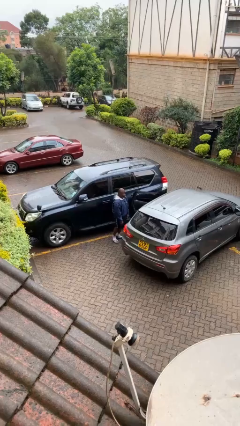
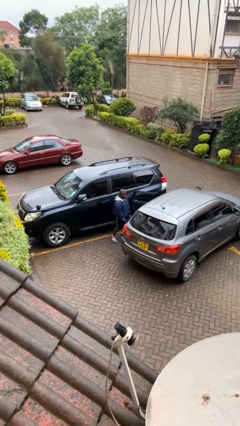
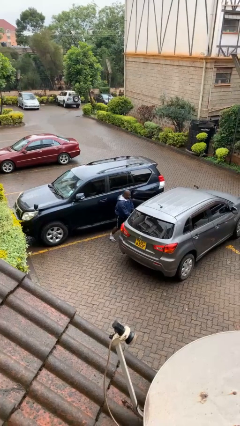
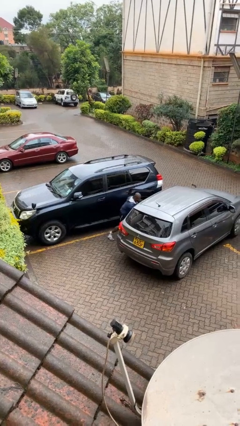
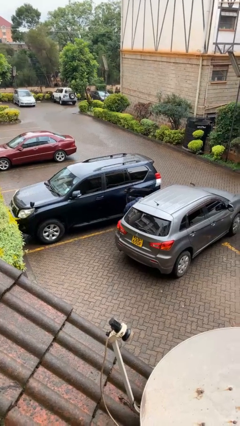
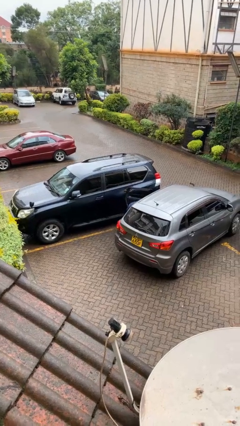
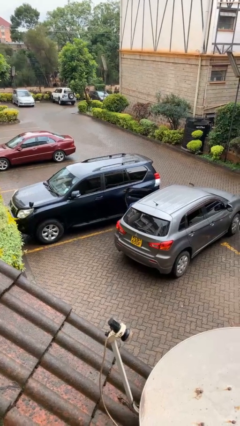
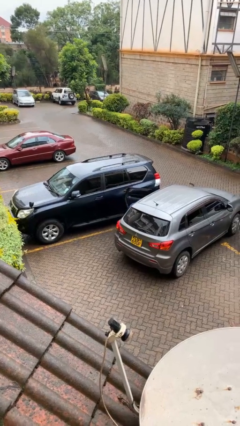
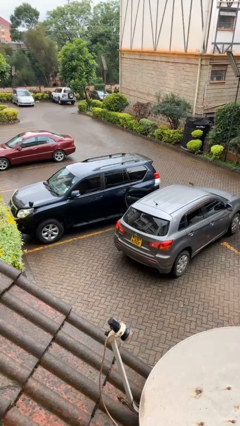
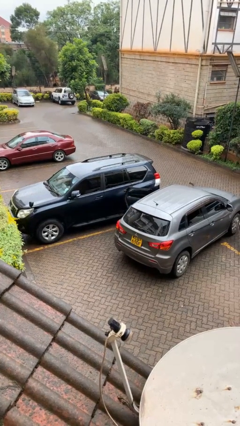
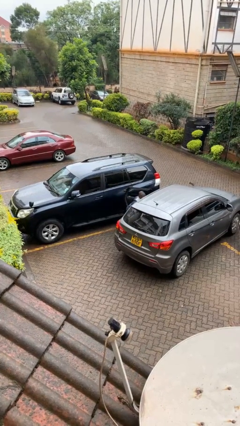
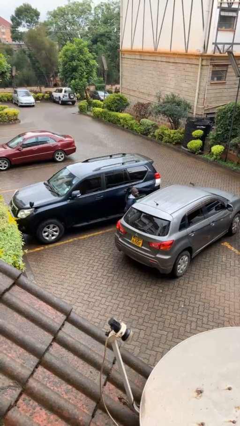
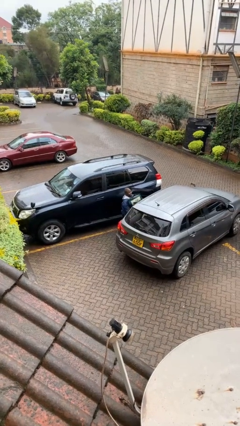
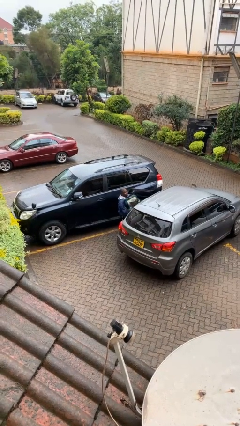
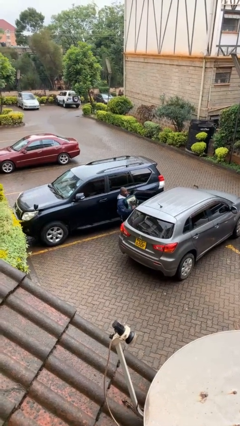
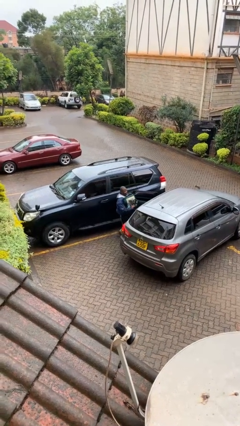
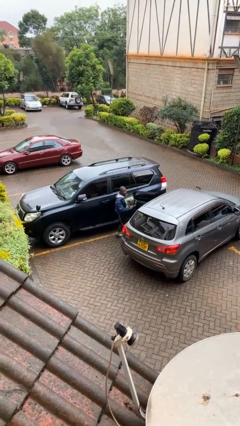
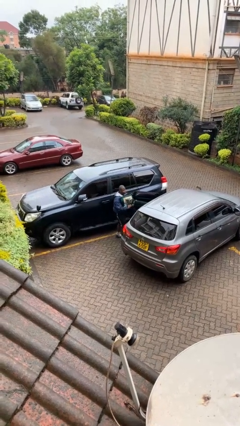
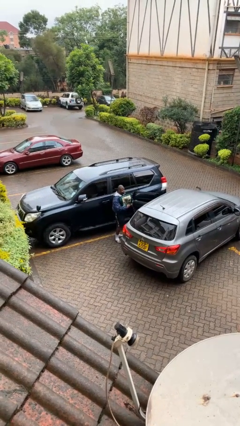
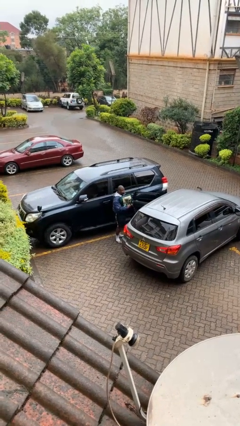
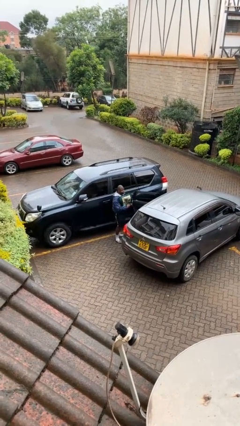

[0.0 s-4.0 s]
person unloads car

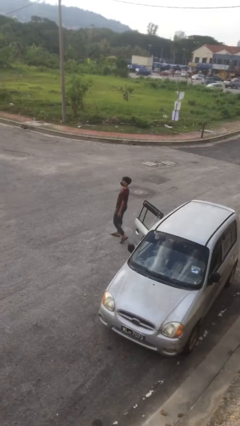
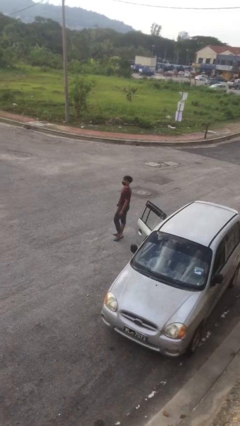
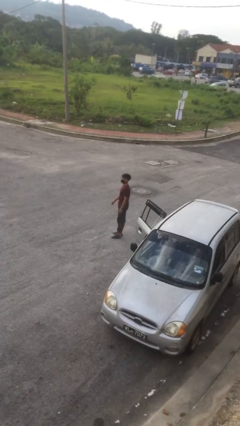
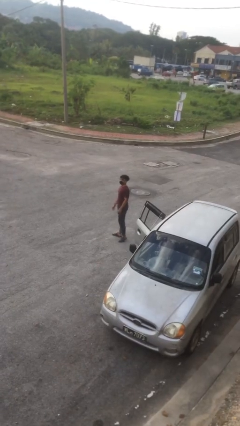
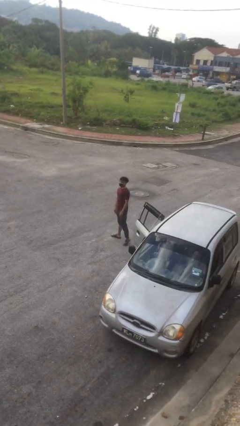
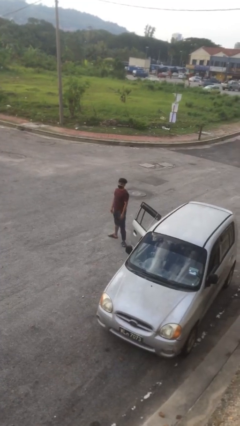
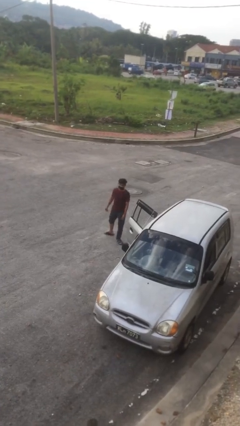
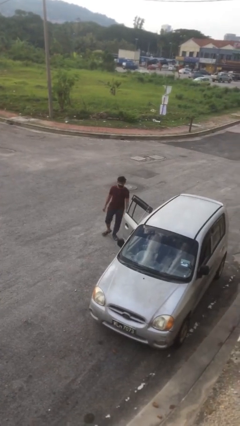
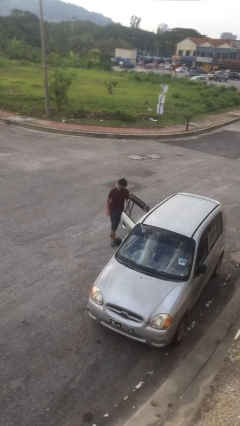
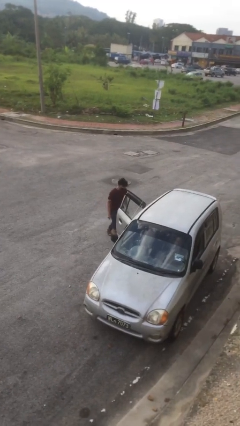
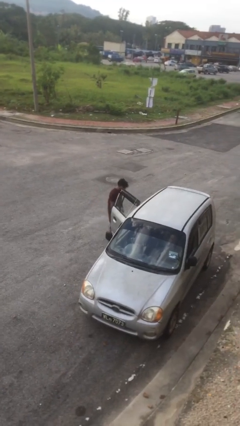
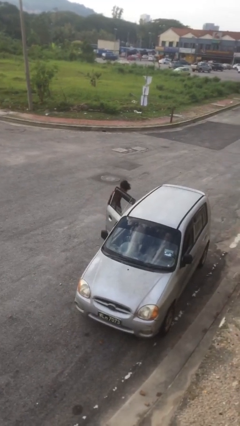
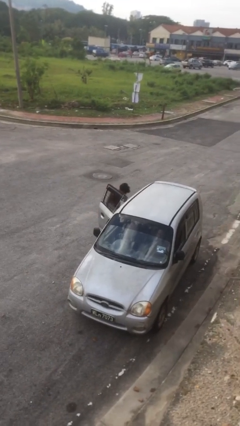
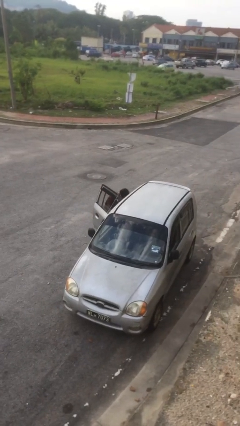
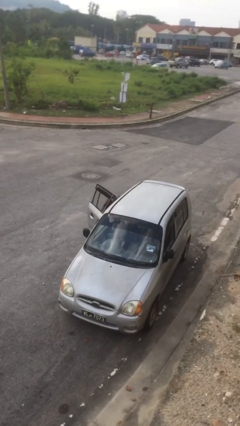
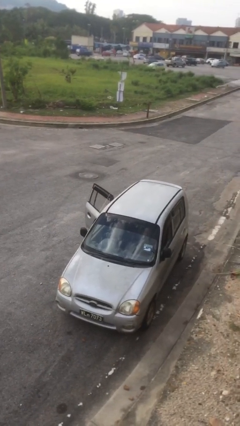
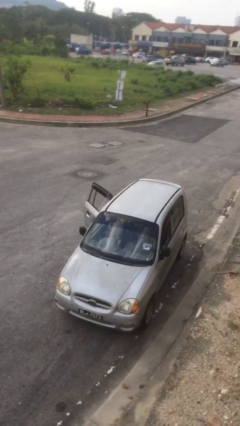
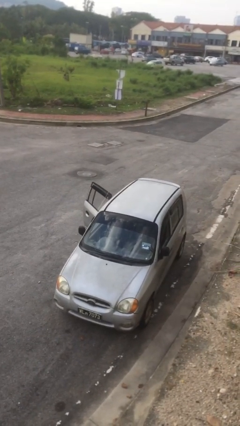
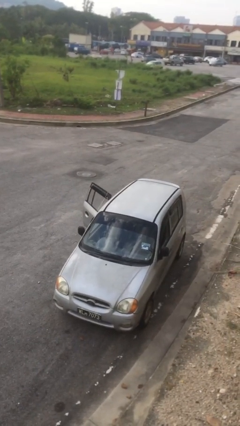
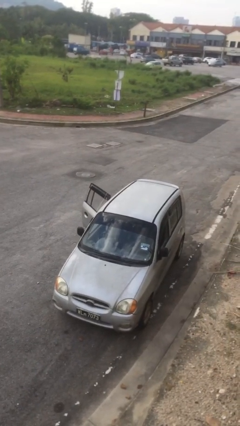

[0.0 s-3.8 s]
person enters car

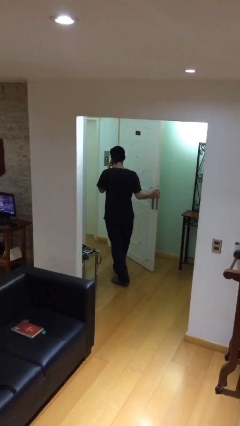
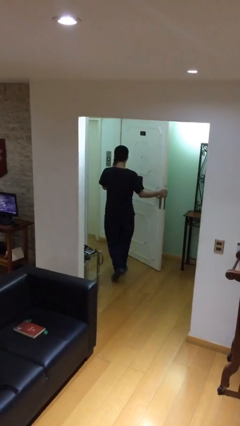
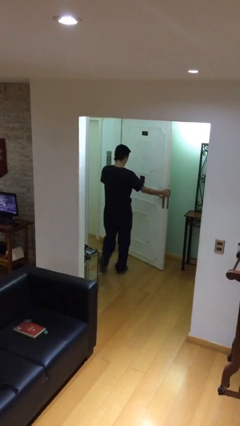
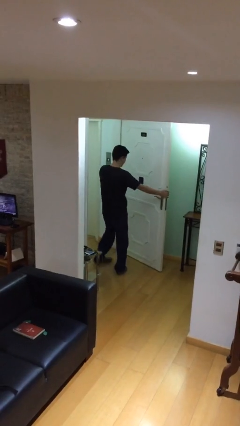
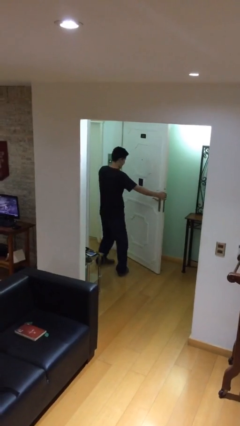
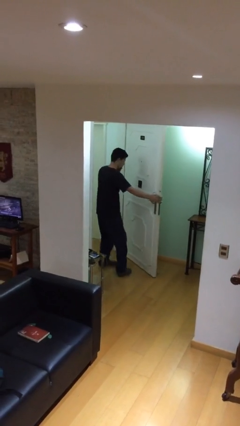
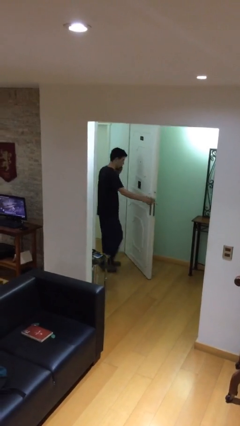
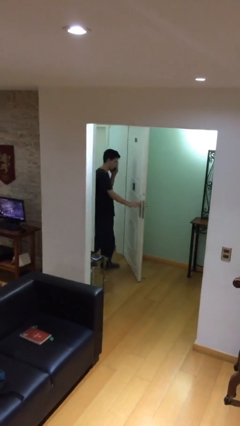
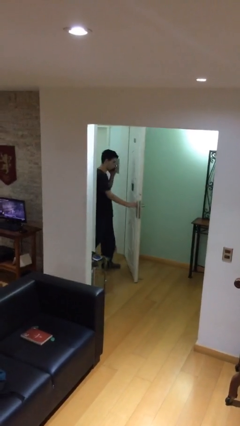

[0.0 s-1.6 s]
person exits scene through structure

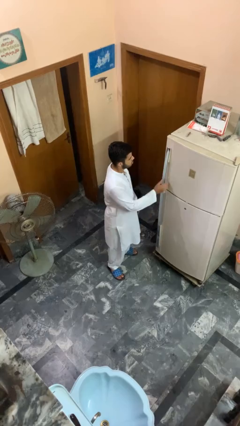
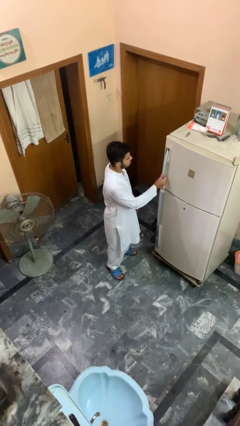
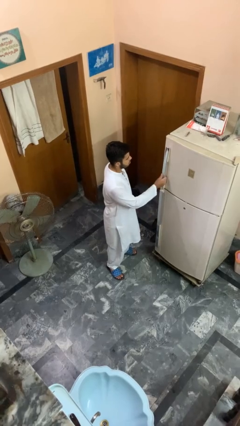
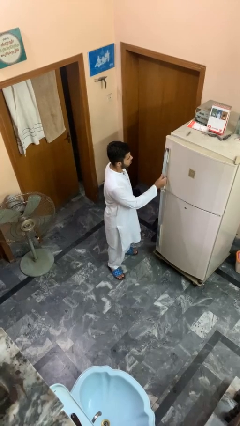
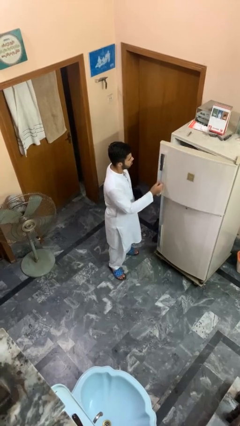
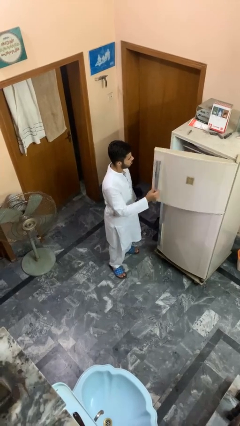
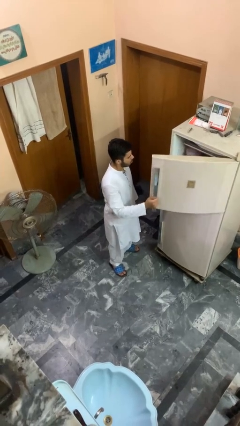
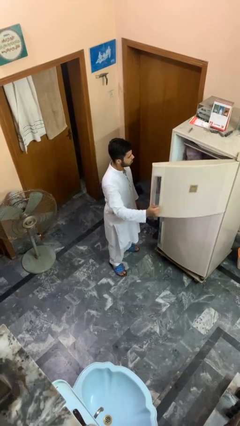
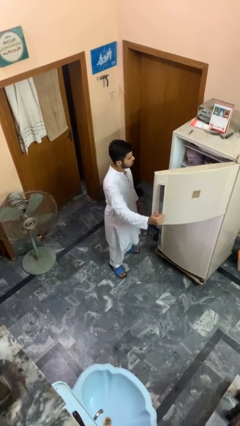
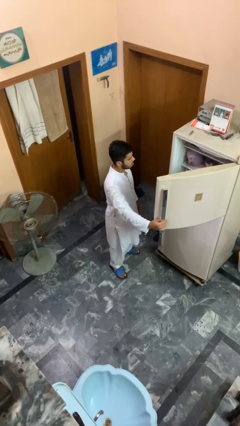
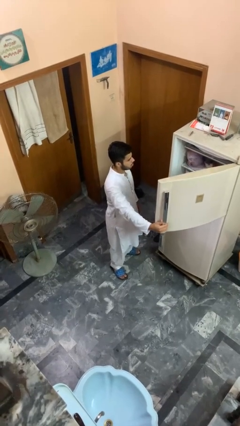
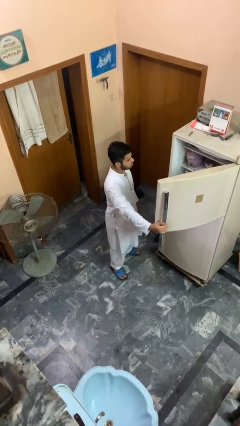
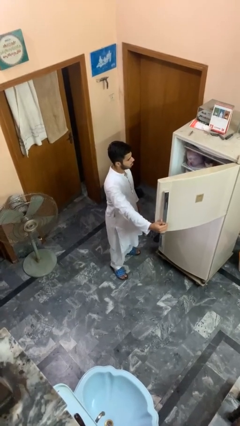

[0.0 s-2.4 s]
person opens refrigerator

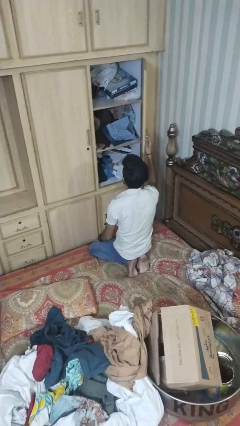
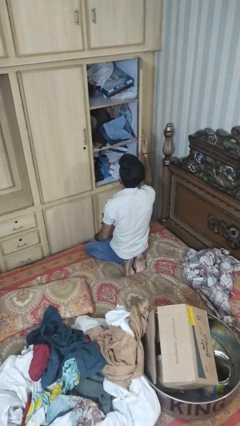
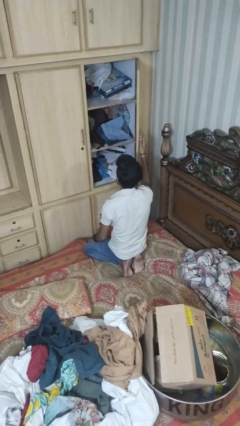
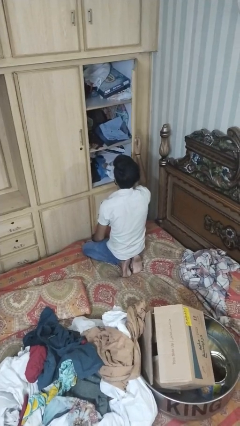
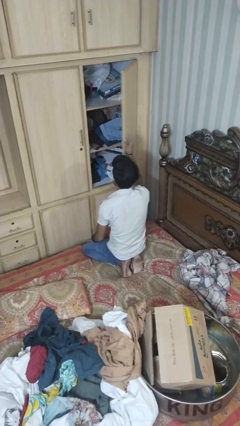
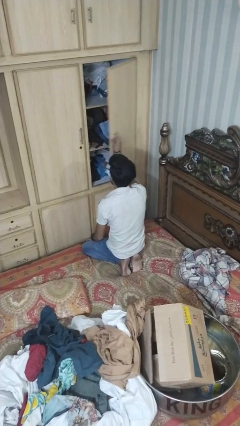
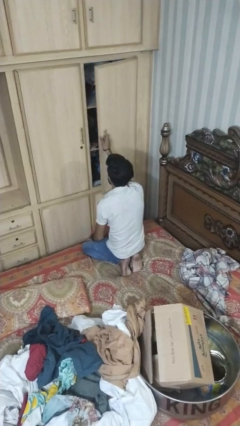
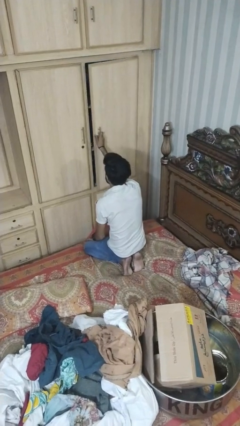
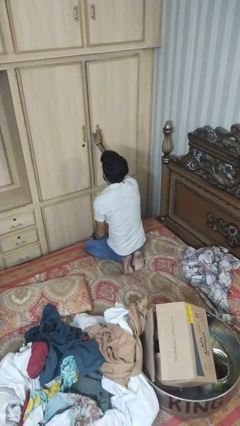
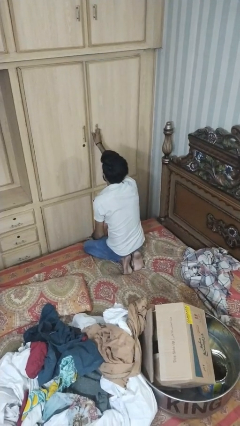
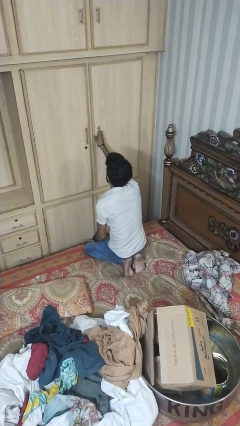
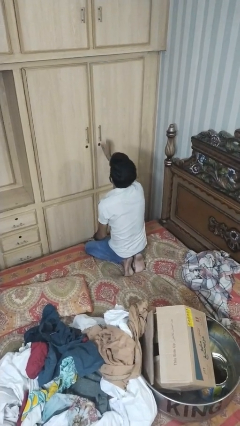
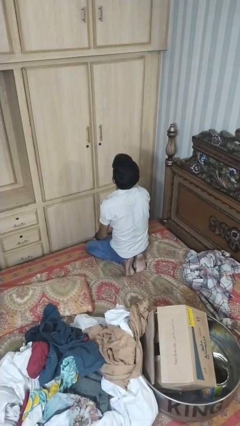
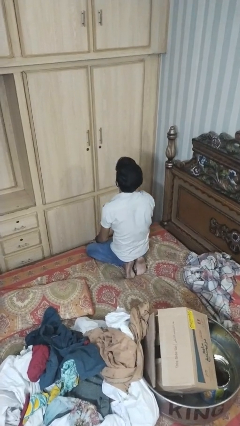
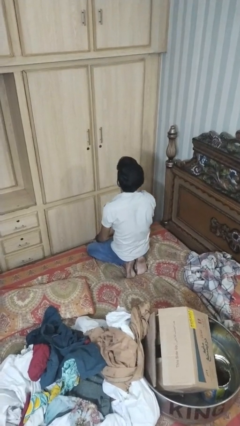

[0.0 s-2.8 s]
person closes dresser drawer

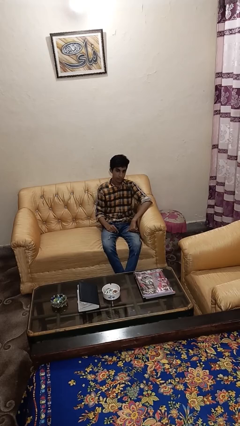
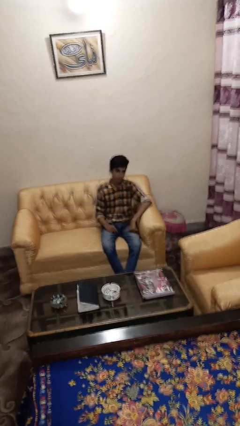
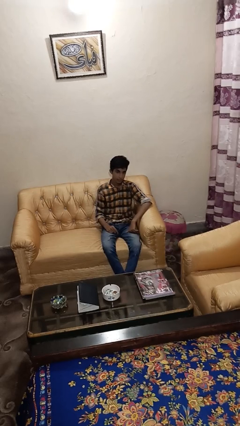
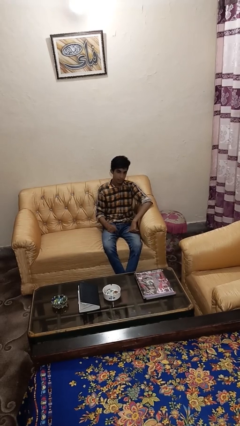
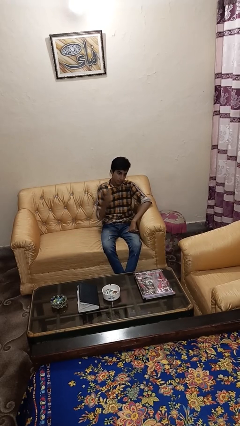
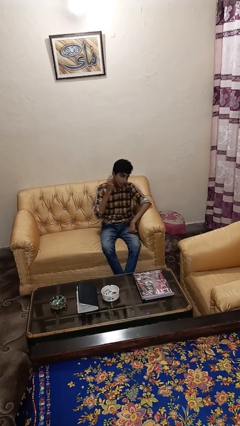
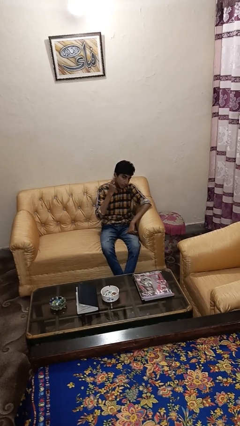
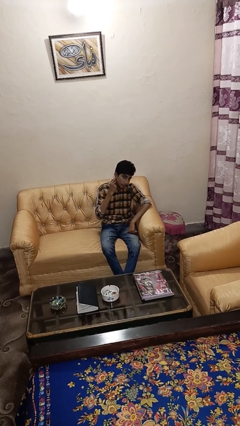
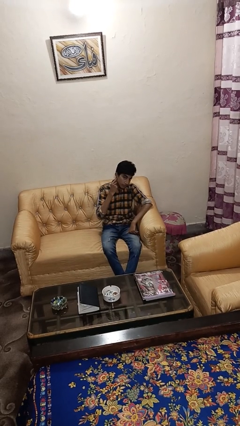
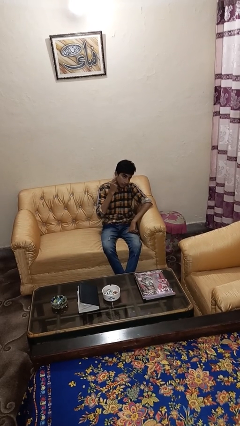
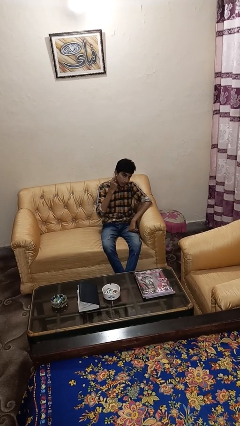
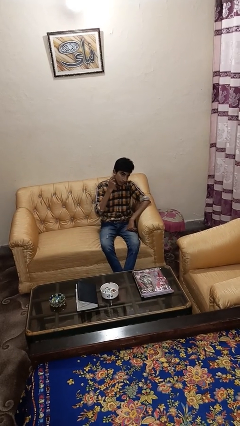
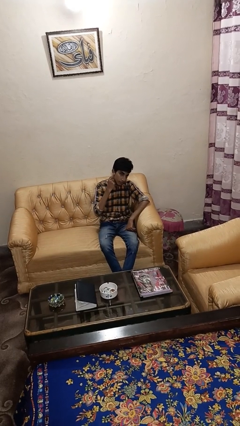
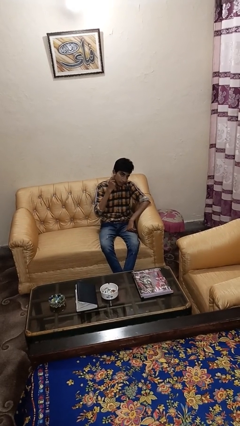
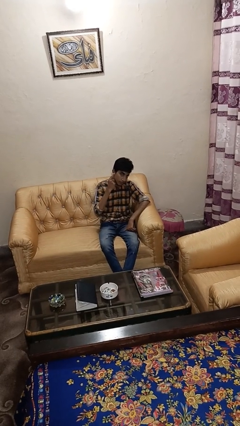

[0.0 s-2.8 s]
person gestures listen closely
